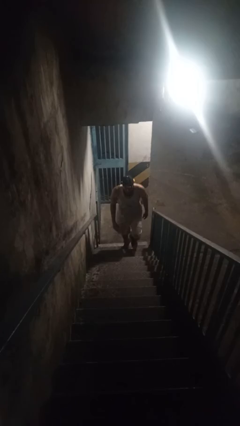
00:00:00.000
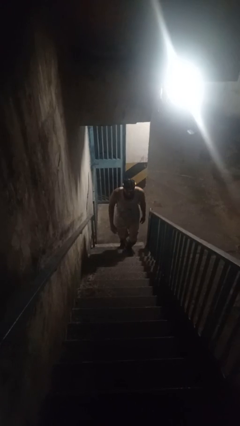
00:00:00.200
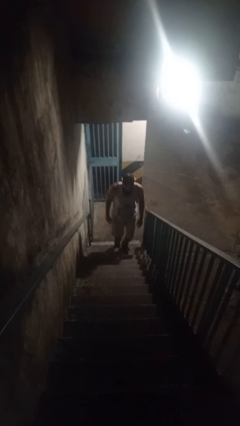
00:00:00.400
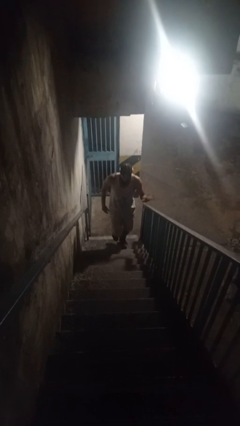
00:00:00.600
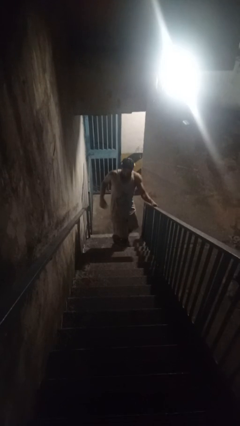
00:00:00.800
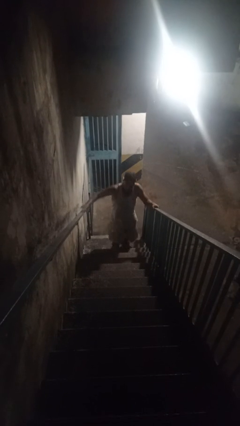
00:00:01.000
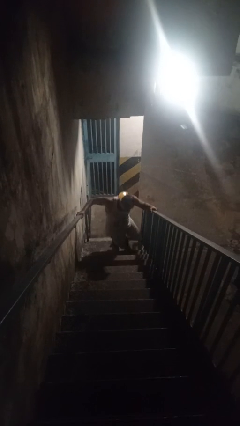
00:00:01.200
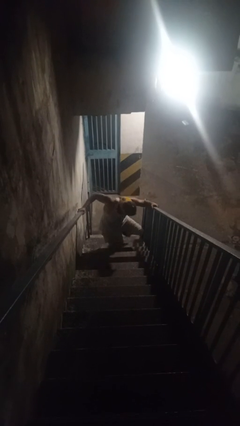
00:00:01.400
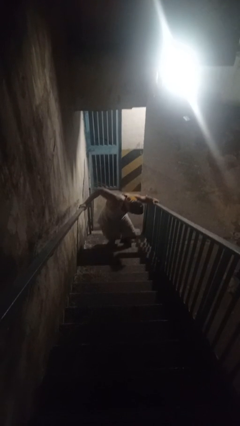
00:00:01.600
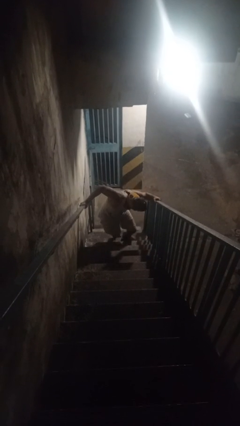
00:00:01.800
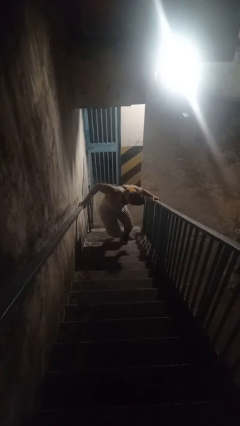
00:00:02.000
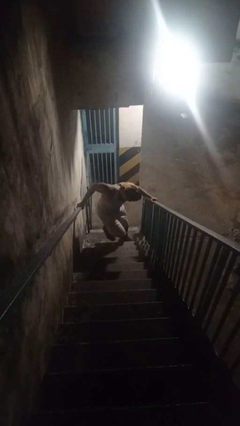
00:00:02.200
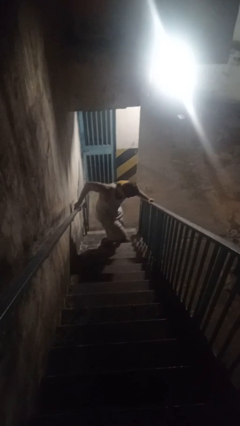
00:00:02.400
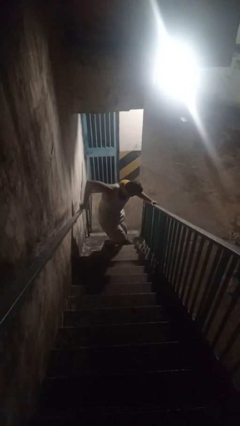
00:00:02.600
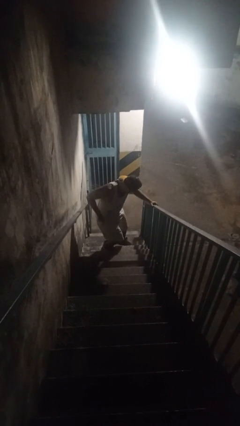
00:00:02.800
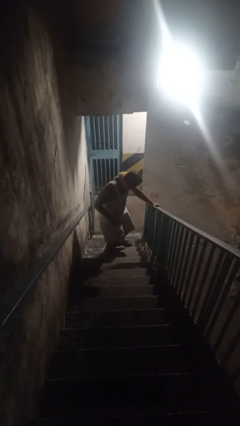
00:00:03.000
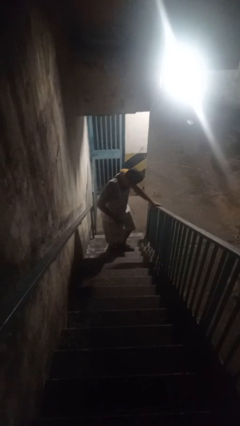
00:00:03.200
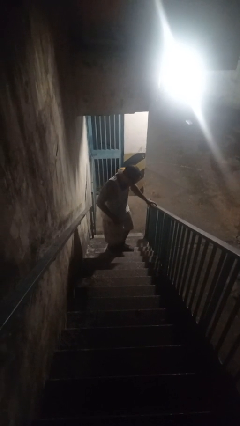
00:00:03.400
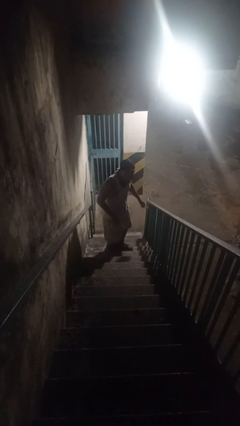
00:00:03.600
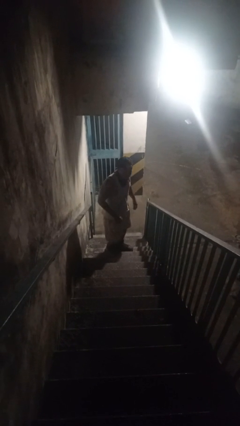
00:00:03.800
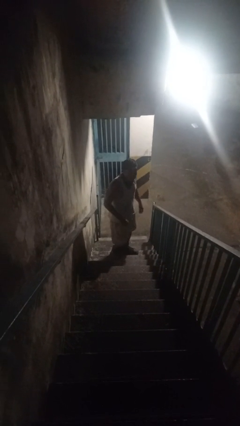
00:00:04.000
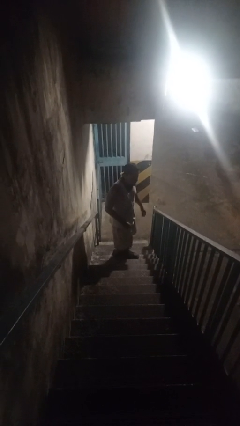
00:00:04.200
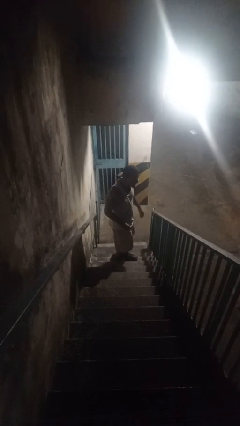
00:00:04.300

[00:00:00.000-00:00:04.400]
person trips on stair

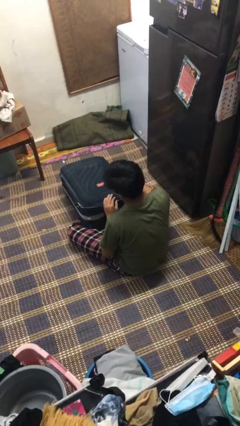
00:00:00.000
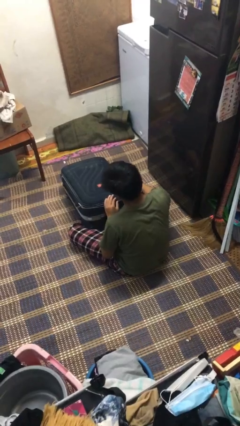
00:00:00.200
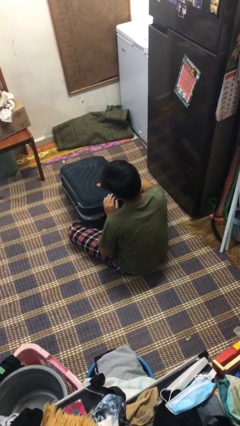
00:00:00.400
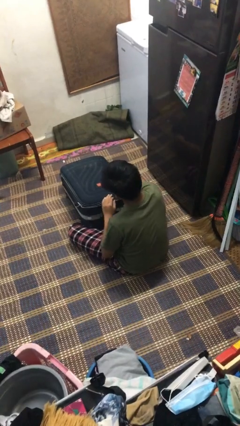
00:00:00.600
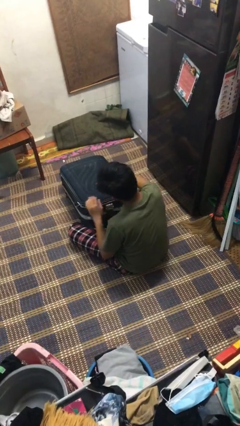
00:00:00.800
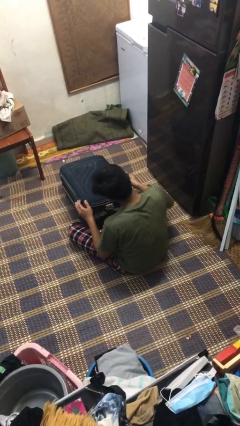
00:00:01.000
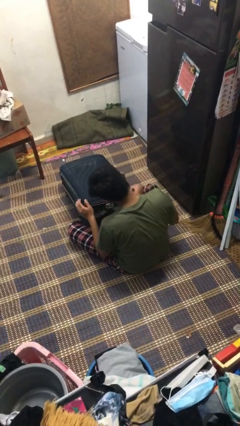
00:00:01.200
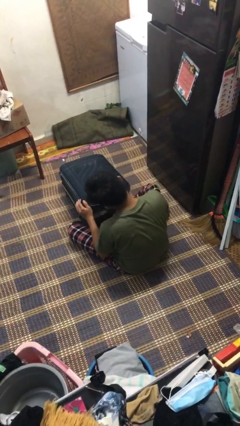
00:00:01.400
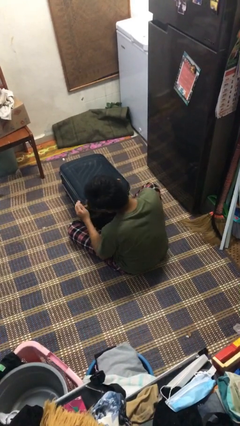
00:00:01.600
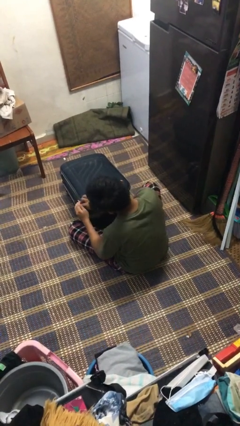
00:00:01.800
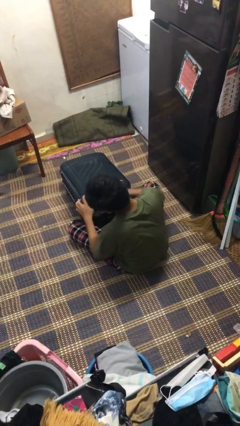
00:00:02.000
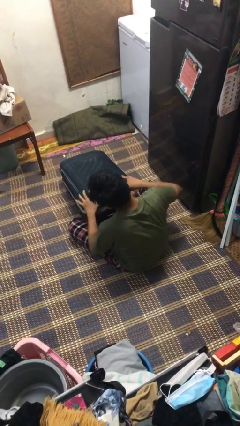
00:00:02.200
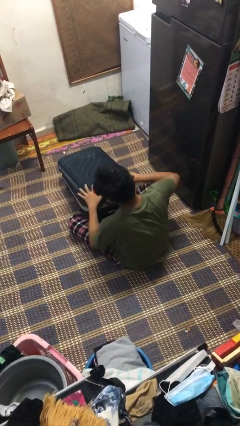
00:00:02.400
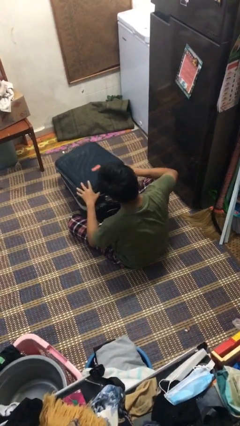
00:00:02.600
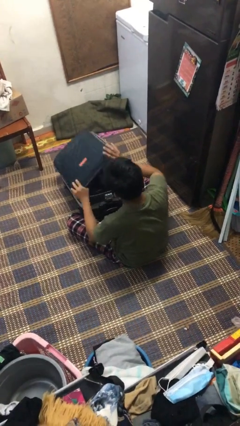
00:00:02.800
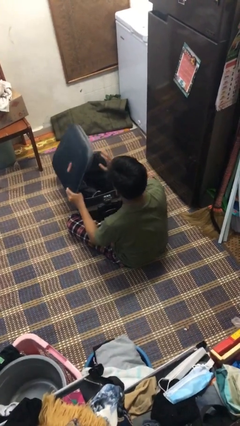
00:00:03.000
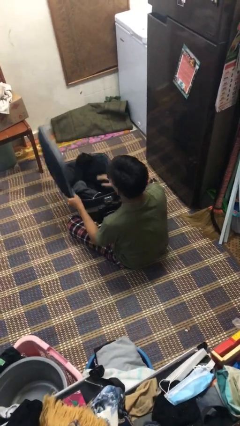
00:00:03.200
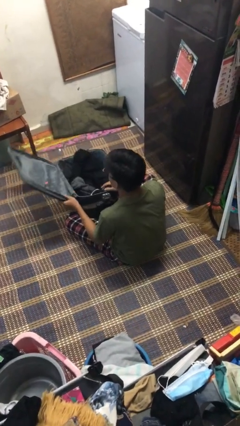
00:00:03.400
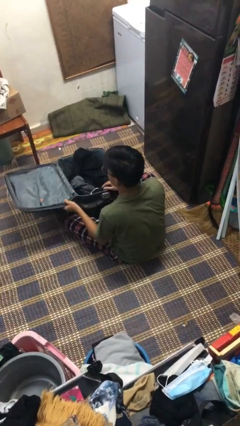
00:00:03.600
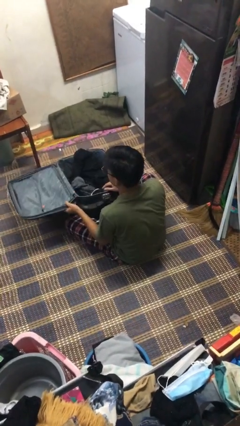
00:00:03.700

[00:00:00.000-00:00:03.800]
person opens suitcase

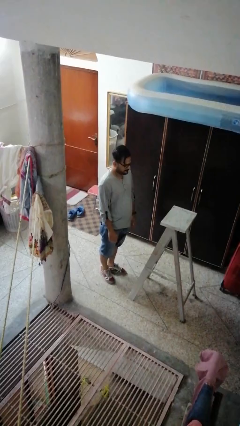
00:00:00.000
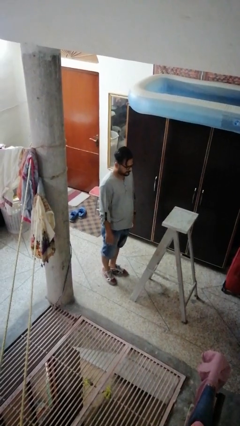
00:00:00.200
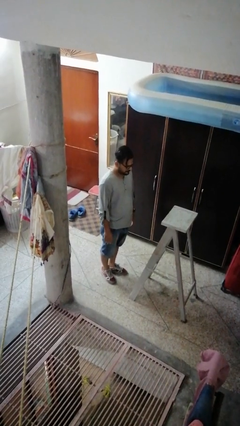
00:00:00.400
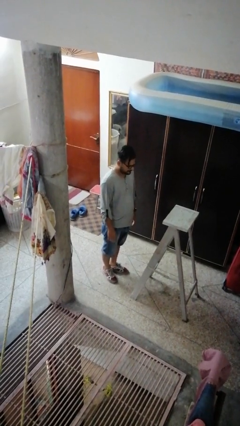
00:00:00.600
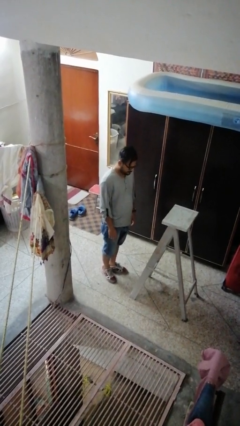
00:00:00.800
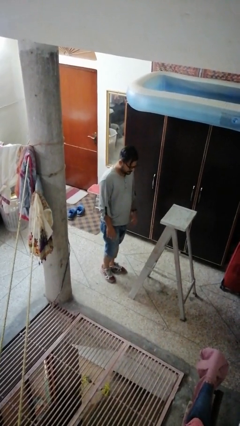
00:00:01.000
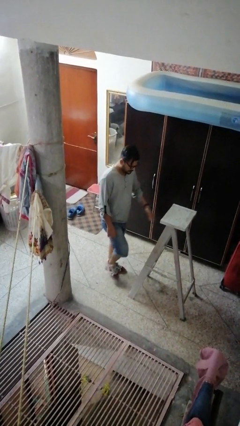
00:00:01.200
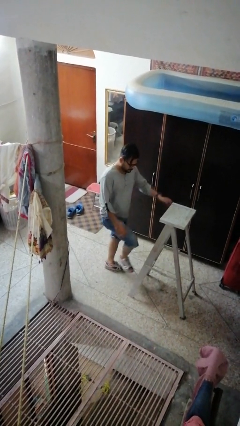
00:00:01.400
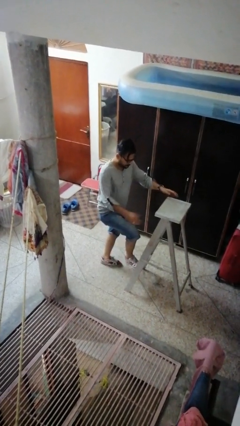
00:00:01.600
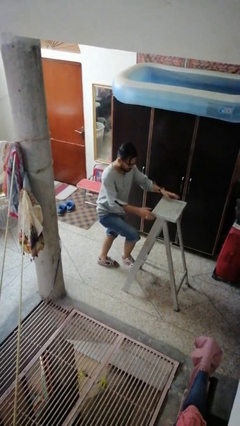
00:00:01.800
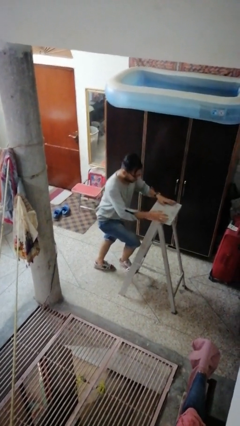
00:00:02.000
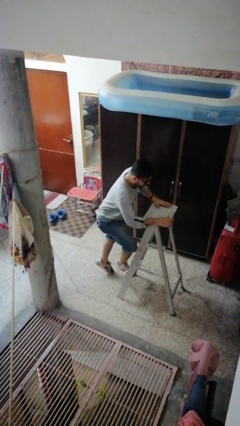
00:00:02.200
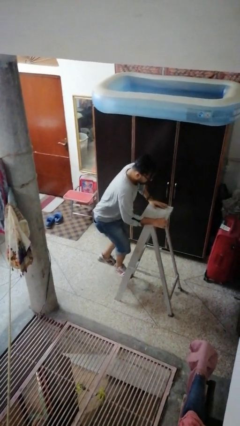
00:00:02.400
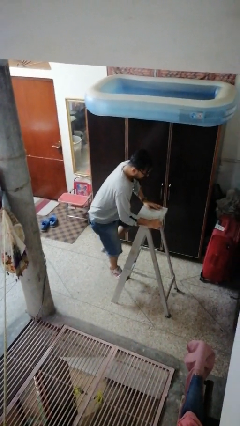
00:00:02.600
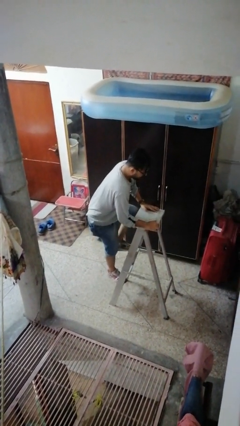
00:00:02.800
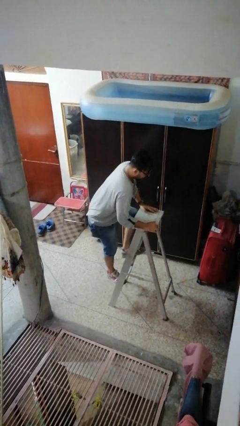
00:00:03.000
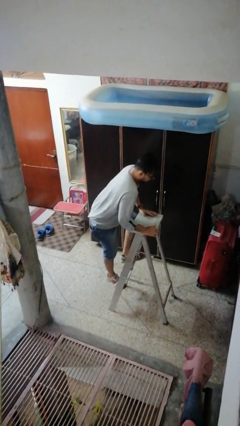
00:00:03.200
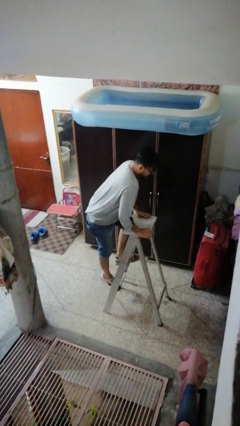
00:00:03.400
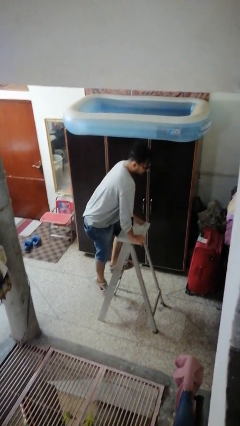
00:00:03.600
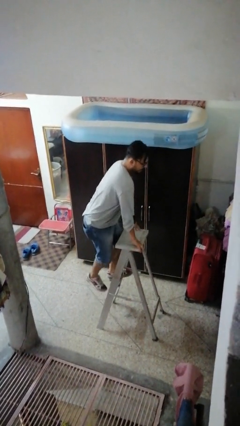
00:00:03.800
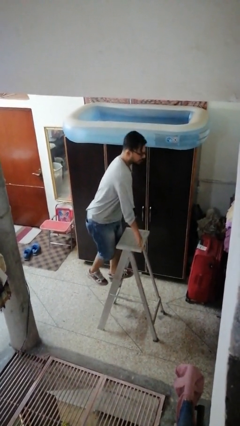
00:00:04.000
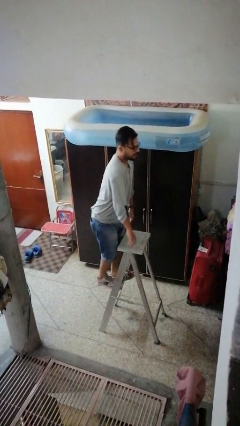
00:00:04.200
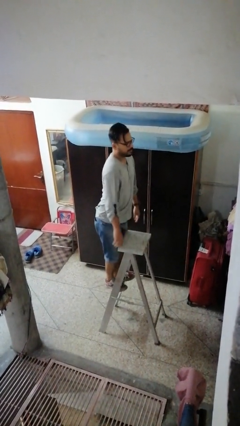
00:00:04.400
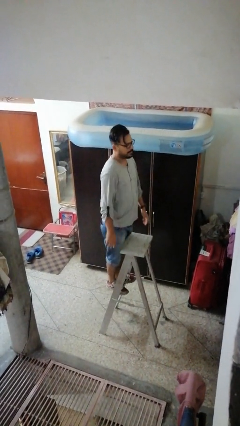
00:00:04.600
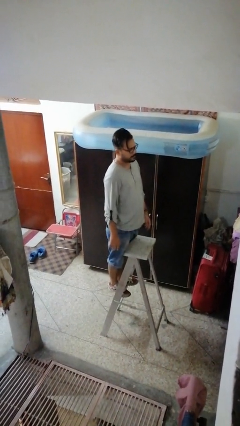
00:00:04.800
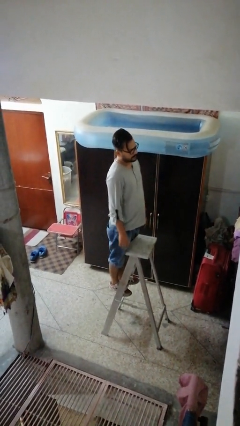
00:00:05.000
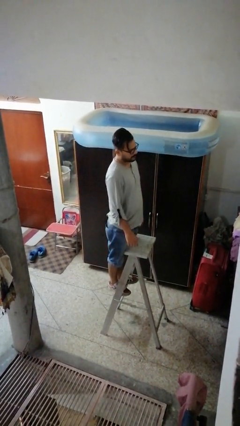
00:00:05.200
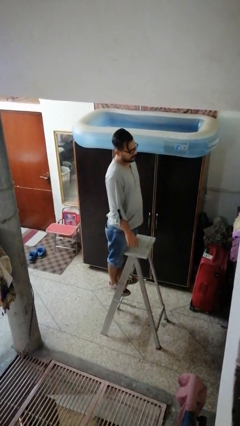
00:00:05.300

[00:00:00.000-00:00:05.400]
person climbs up ladder

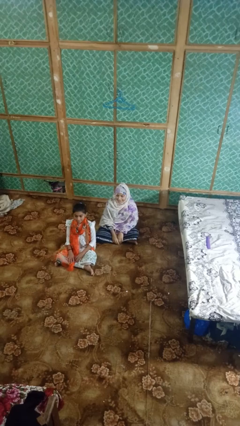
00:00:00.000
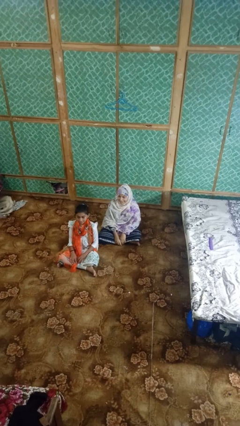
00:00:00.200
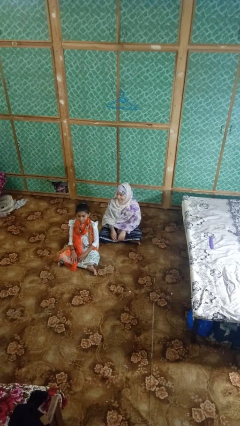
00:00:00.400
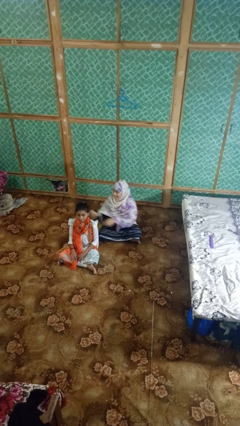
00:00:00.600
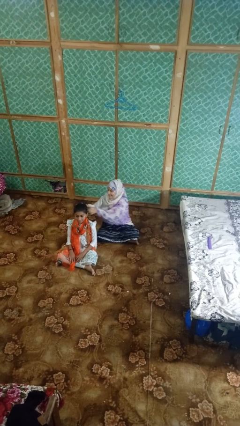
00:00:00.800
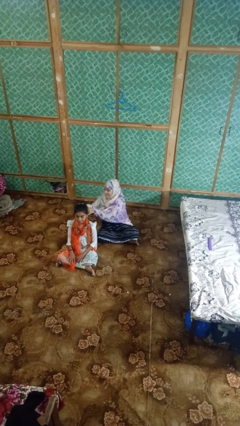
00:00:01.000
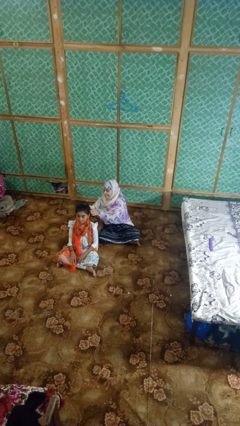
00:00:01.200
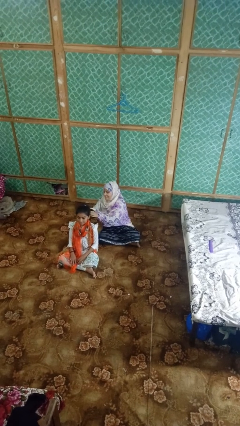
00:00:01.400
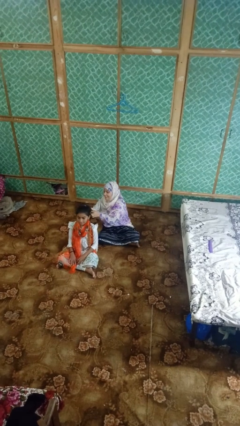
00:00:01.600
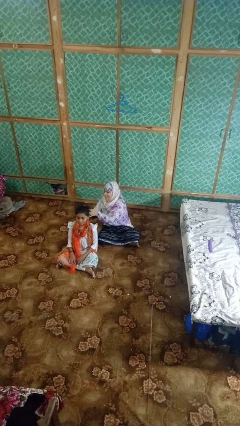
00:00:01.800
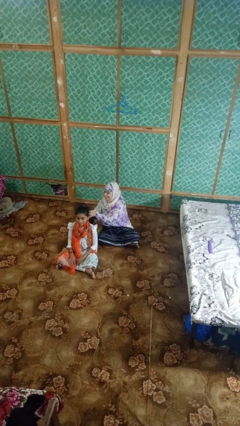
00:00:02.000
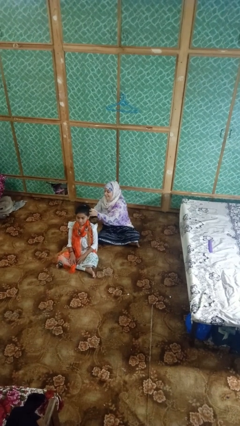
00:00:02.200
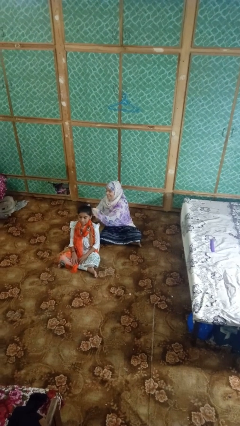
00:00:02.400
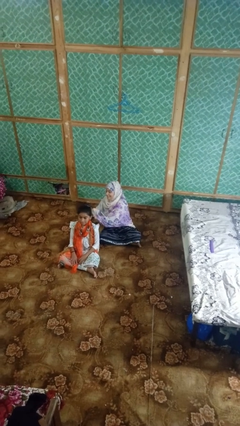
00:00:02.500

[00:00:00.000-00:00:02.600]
person braids hair of person

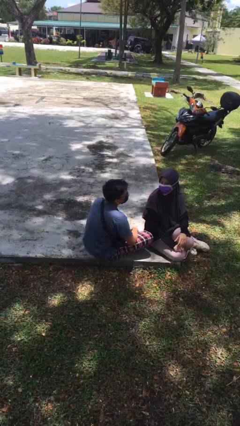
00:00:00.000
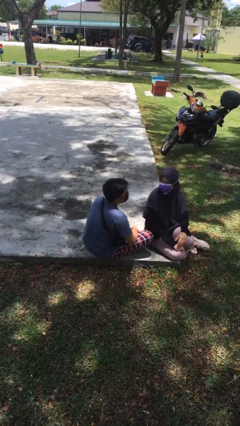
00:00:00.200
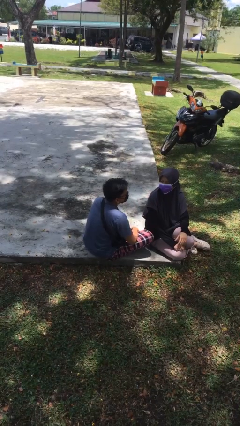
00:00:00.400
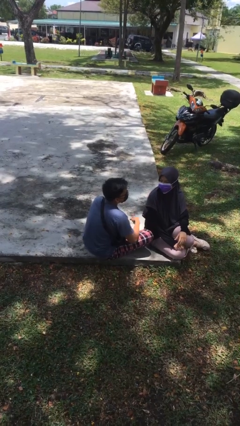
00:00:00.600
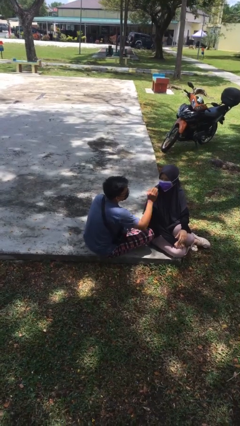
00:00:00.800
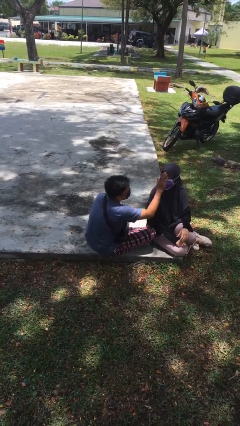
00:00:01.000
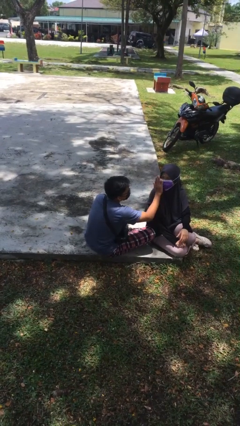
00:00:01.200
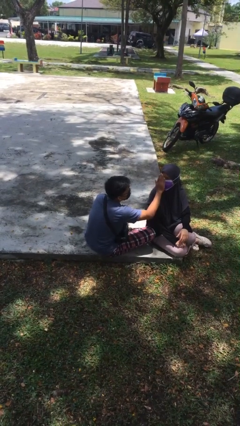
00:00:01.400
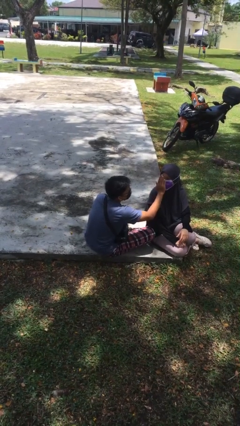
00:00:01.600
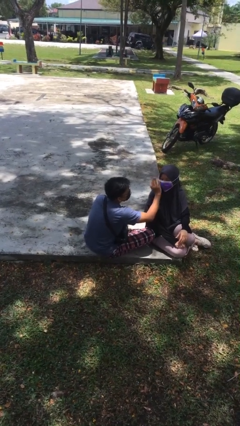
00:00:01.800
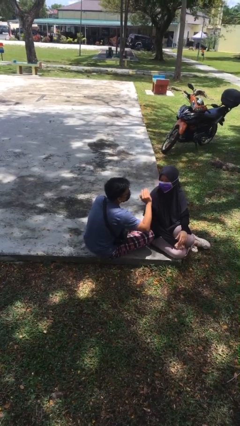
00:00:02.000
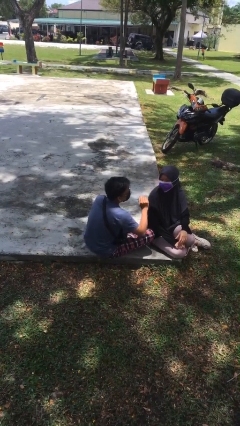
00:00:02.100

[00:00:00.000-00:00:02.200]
person touches face of person
